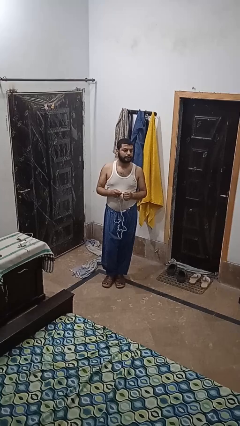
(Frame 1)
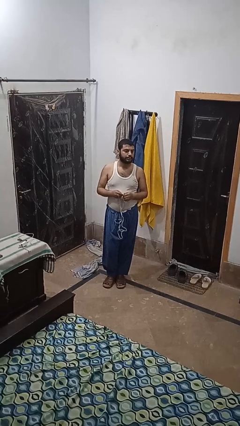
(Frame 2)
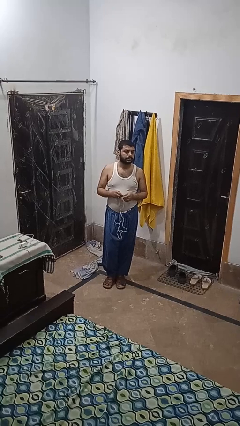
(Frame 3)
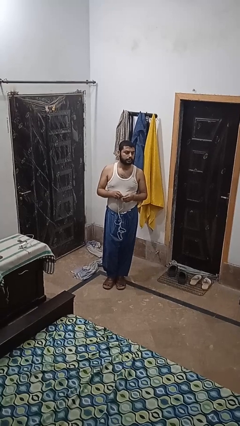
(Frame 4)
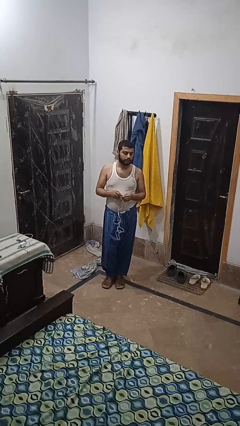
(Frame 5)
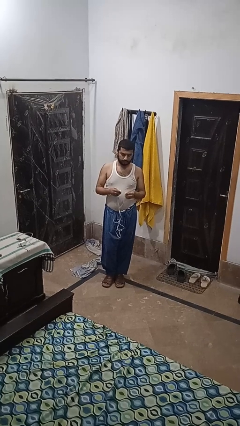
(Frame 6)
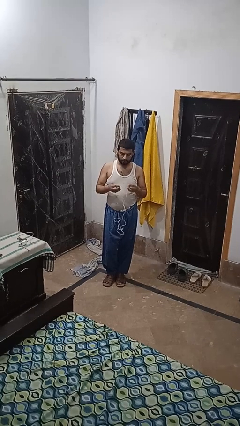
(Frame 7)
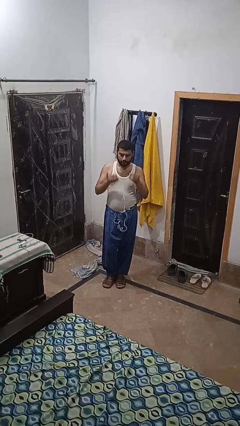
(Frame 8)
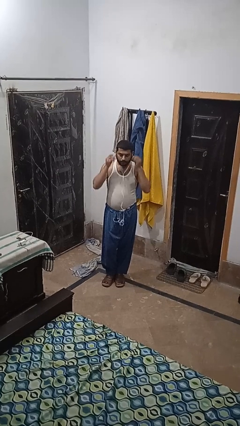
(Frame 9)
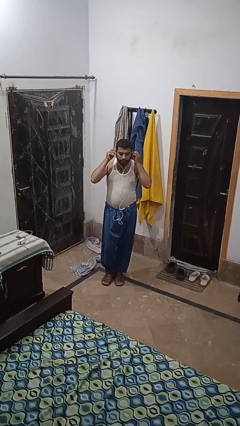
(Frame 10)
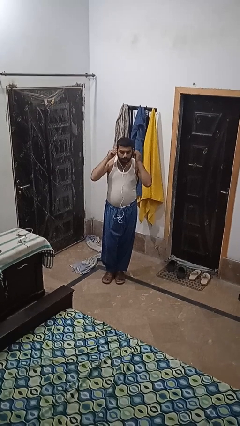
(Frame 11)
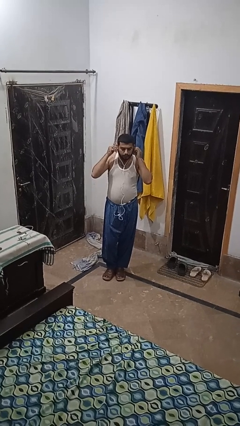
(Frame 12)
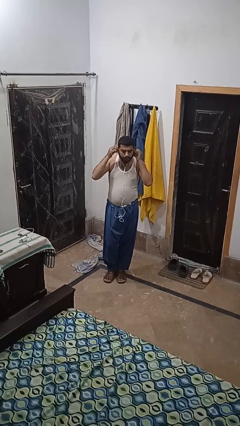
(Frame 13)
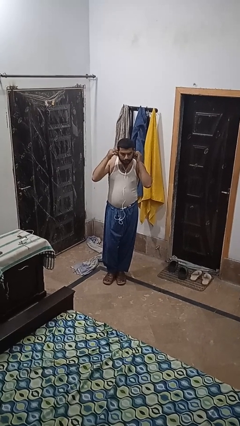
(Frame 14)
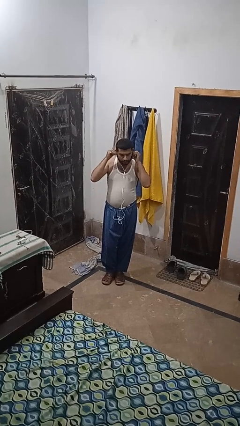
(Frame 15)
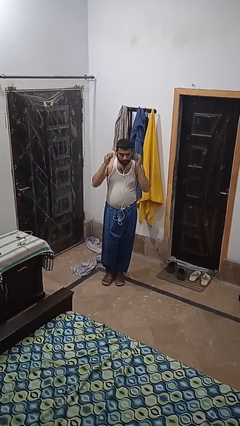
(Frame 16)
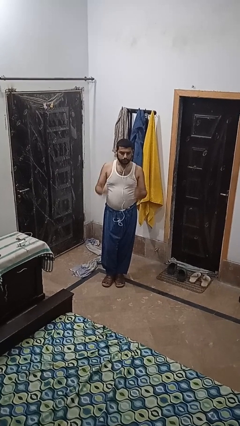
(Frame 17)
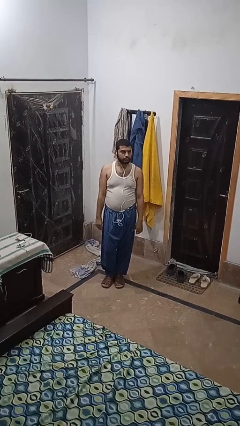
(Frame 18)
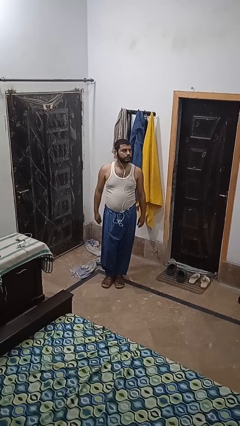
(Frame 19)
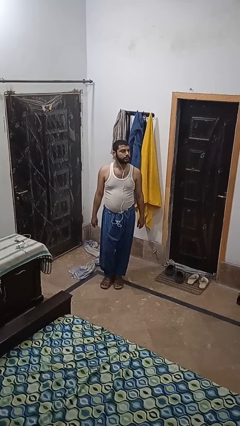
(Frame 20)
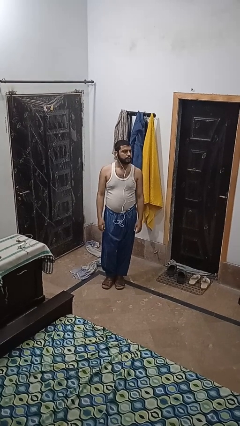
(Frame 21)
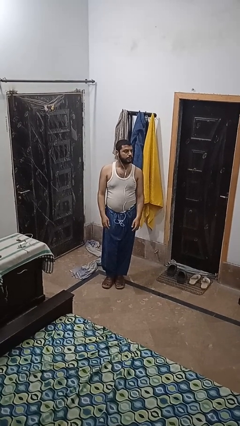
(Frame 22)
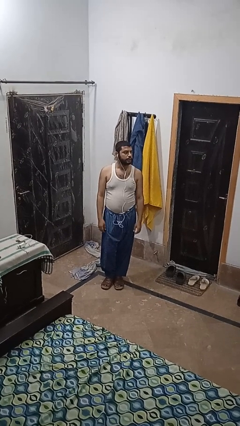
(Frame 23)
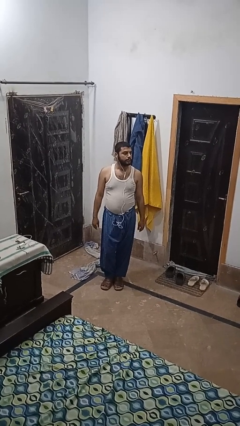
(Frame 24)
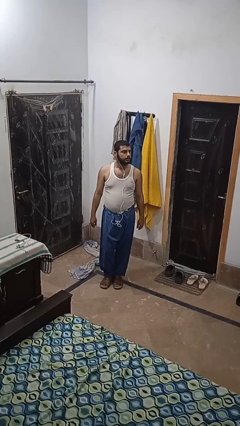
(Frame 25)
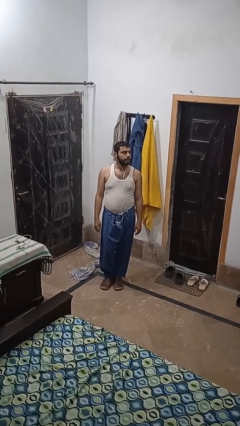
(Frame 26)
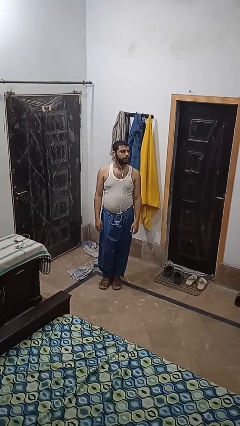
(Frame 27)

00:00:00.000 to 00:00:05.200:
person puts on headphones

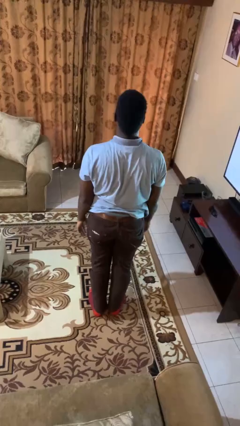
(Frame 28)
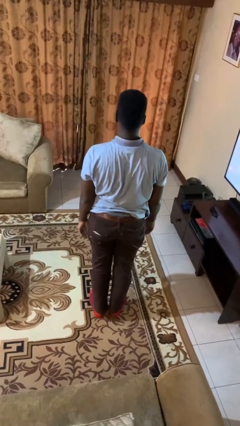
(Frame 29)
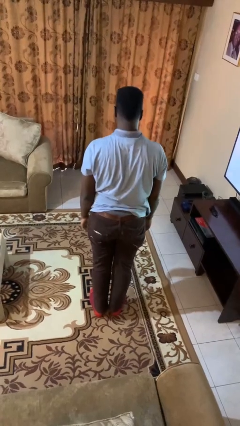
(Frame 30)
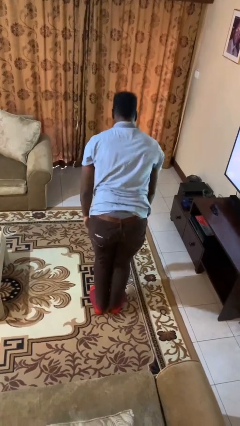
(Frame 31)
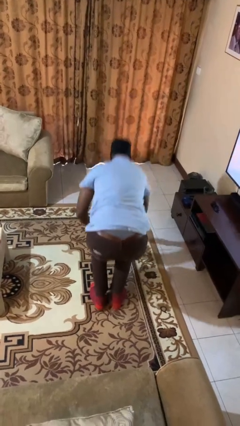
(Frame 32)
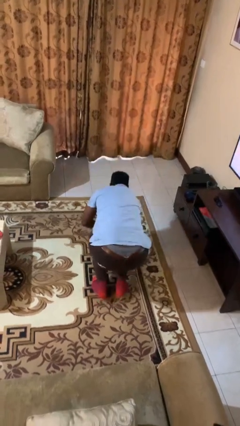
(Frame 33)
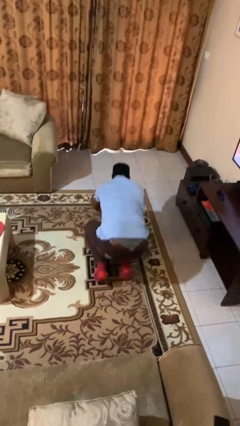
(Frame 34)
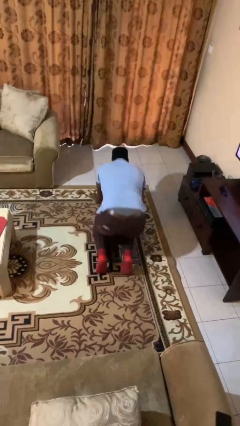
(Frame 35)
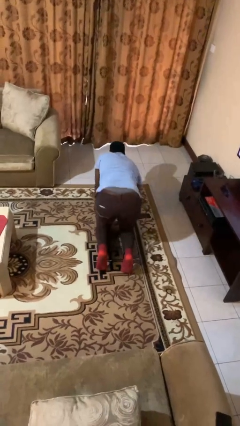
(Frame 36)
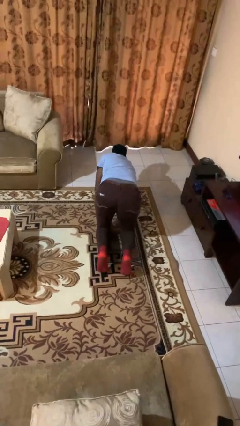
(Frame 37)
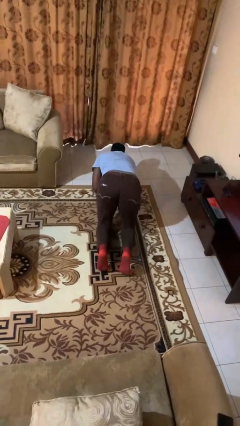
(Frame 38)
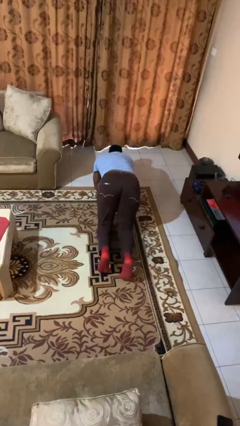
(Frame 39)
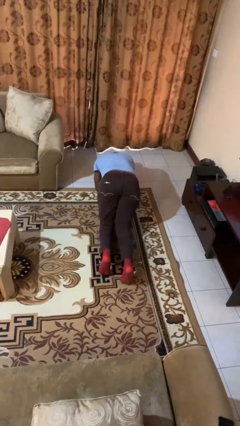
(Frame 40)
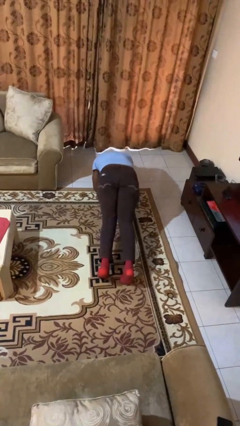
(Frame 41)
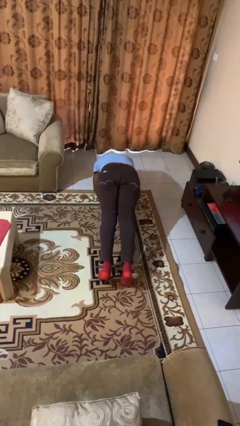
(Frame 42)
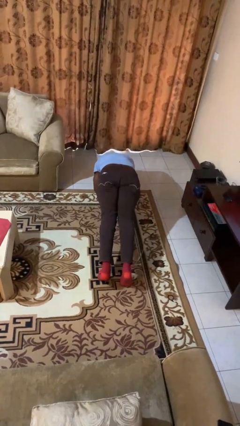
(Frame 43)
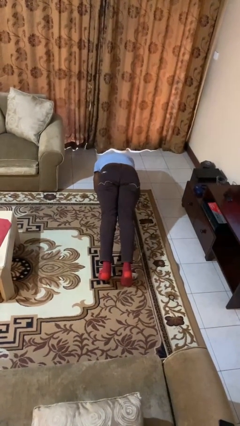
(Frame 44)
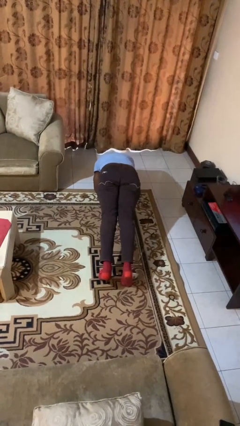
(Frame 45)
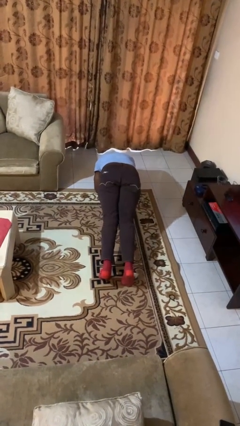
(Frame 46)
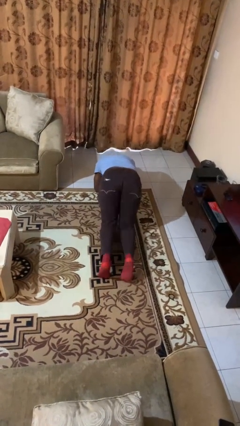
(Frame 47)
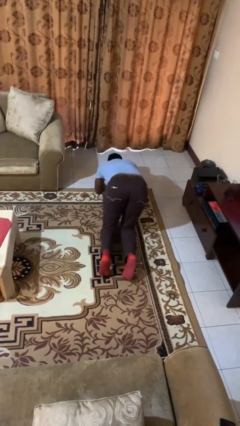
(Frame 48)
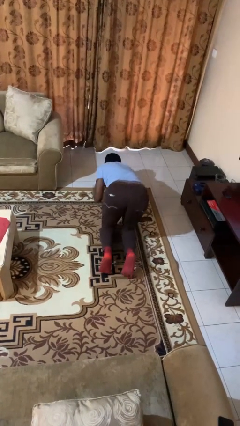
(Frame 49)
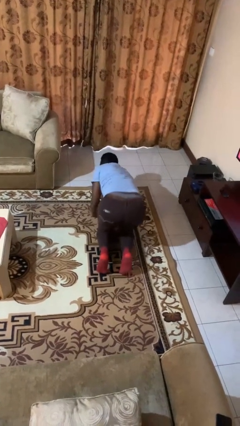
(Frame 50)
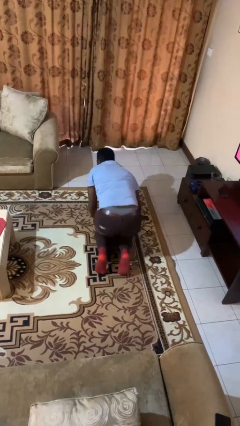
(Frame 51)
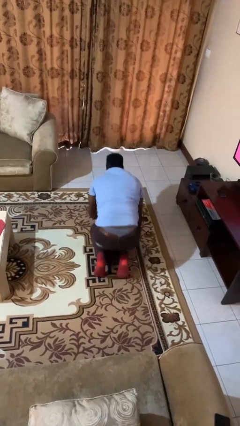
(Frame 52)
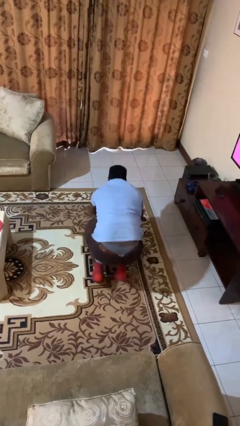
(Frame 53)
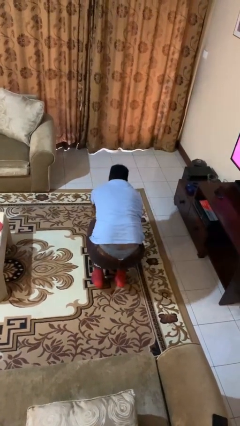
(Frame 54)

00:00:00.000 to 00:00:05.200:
person exercises with plank

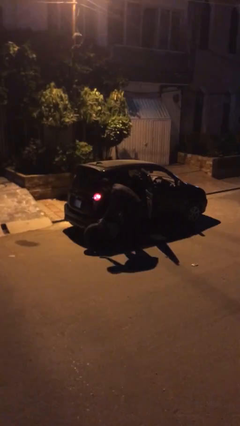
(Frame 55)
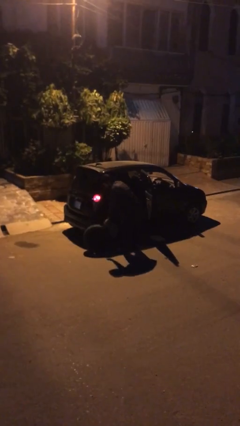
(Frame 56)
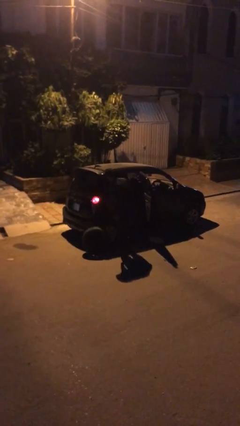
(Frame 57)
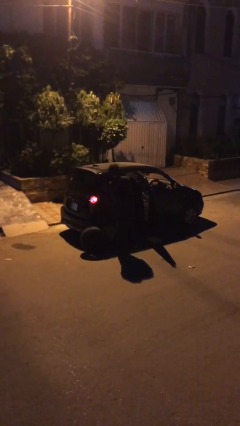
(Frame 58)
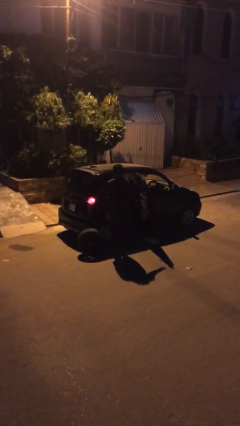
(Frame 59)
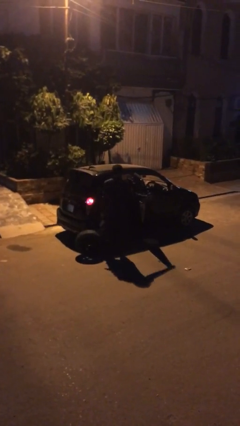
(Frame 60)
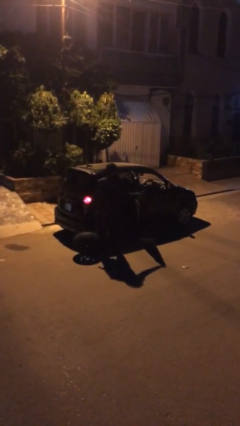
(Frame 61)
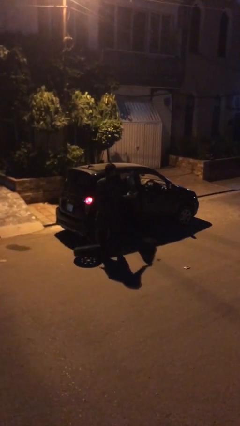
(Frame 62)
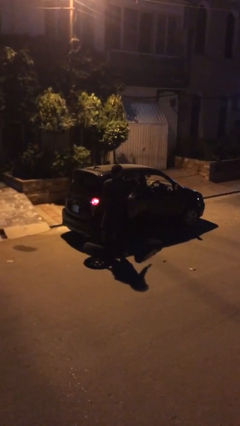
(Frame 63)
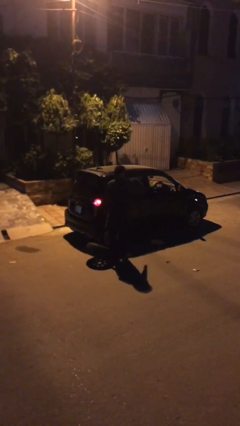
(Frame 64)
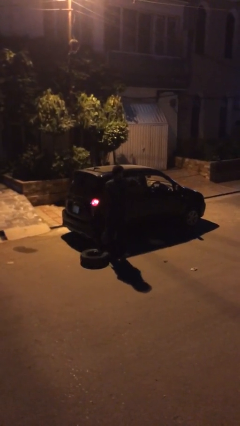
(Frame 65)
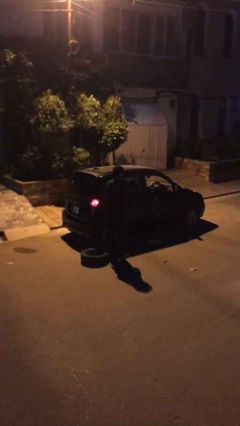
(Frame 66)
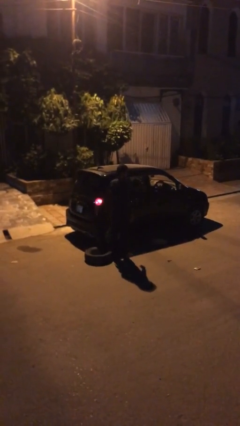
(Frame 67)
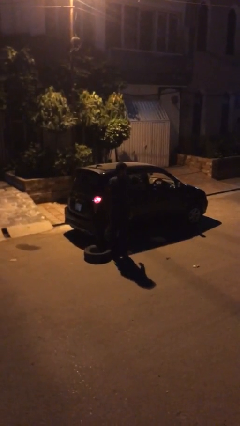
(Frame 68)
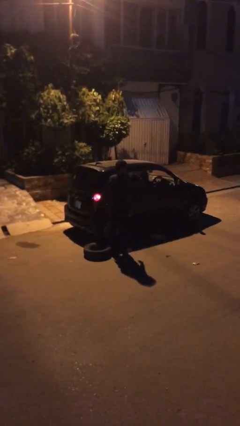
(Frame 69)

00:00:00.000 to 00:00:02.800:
person closes car door

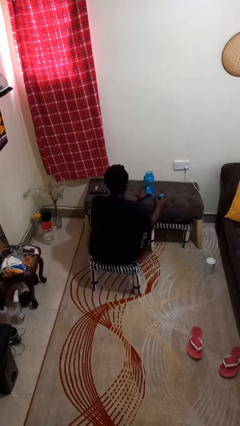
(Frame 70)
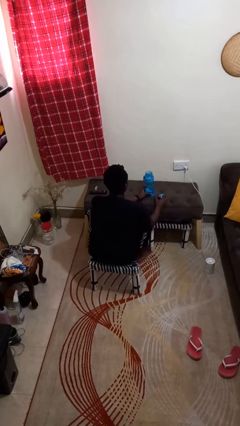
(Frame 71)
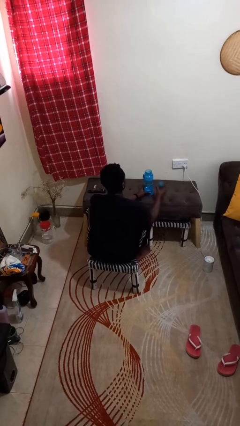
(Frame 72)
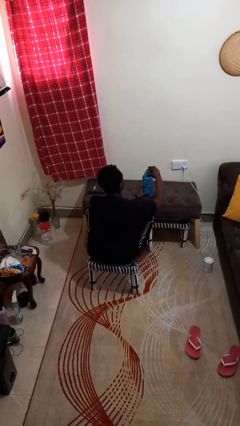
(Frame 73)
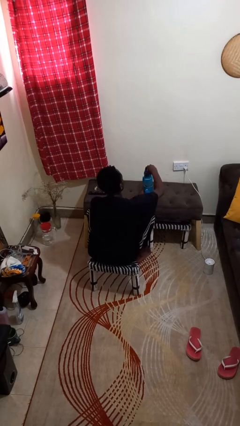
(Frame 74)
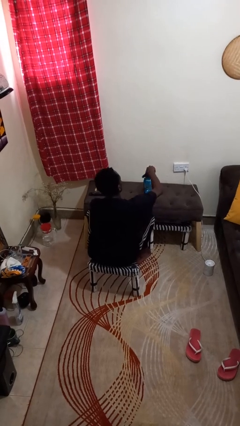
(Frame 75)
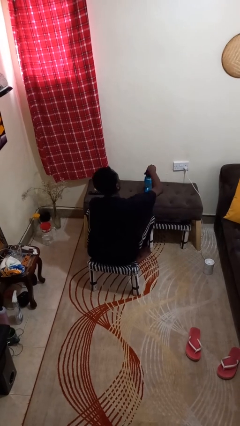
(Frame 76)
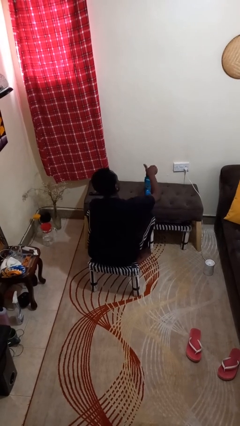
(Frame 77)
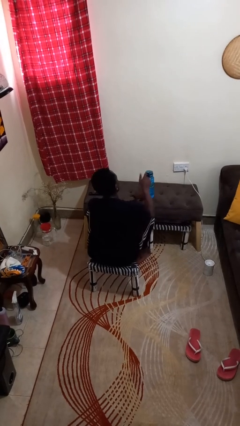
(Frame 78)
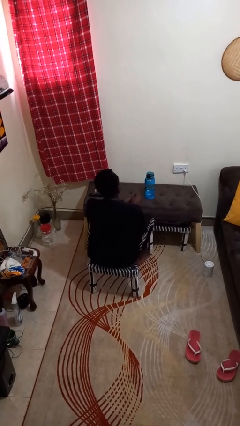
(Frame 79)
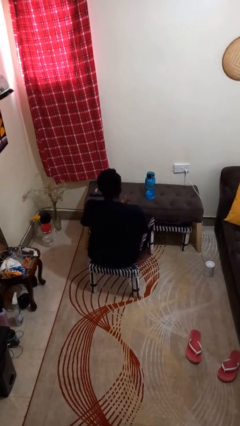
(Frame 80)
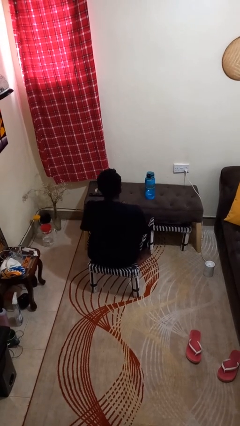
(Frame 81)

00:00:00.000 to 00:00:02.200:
person closes jar

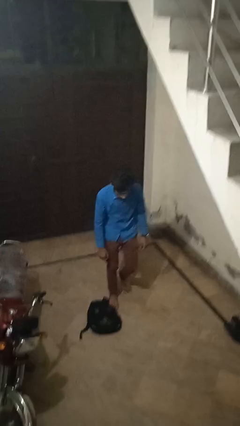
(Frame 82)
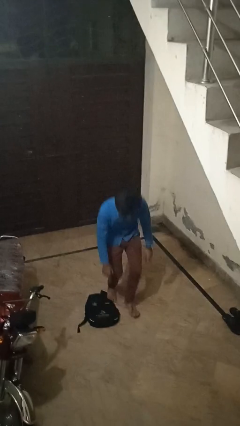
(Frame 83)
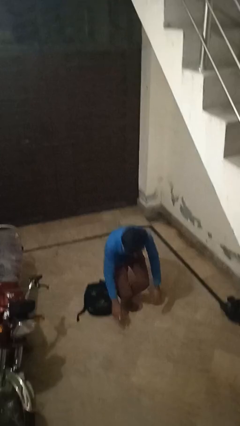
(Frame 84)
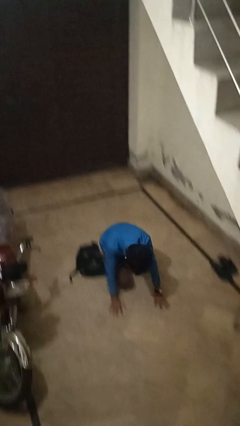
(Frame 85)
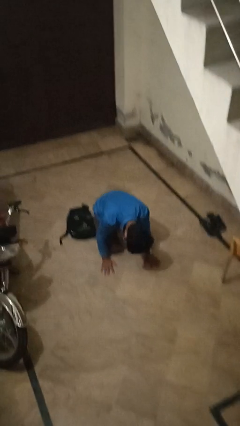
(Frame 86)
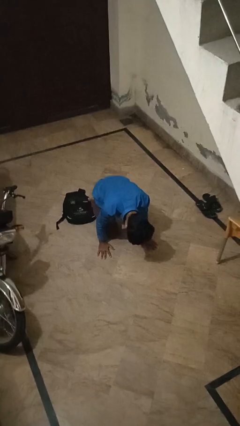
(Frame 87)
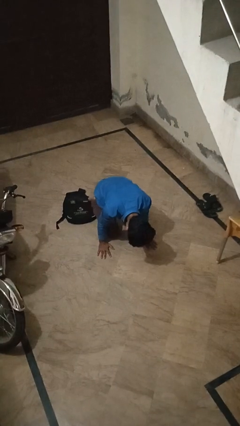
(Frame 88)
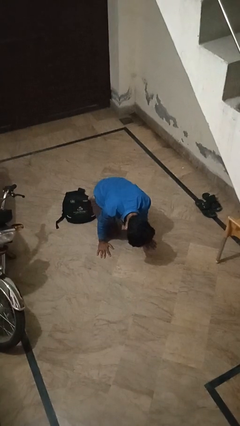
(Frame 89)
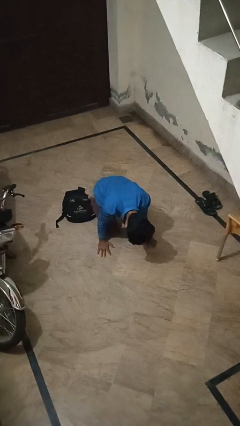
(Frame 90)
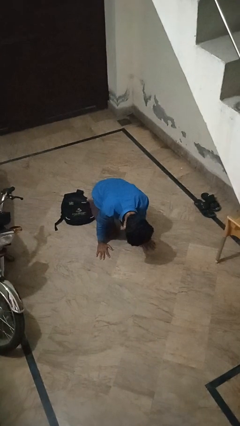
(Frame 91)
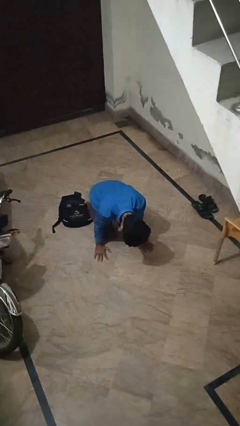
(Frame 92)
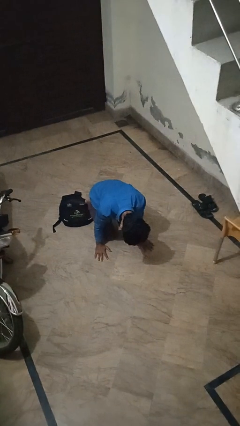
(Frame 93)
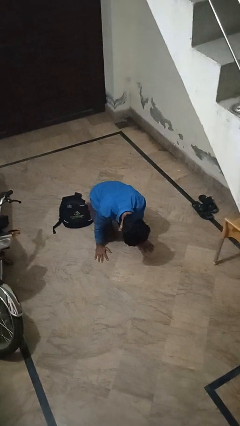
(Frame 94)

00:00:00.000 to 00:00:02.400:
person trips on object on floor
